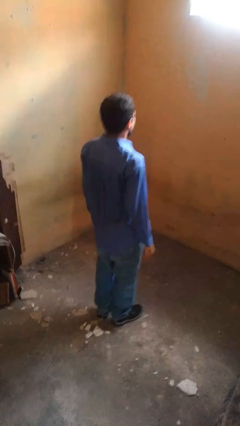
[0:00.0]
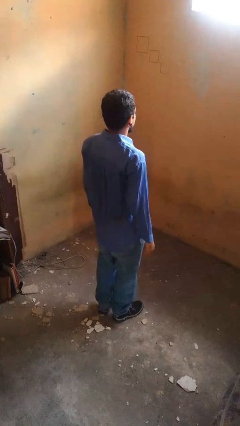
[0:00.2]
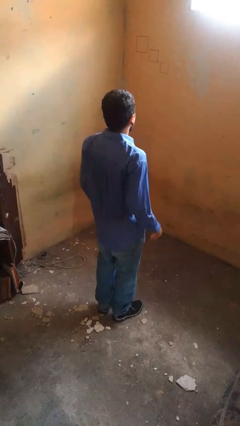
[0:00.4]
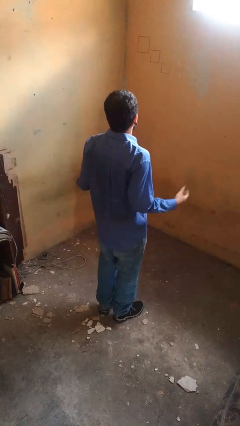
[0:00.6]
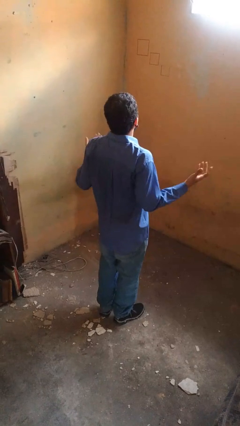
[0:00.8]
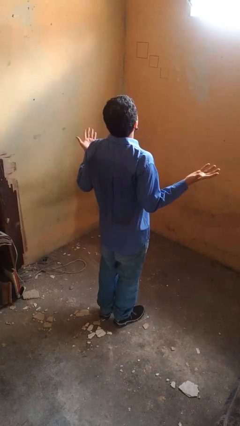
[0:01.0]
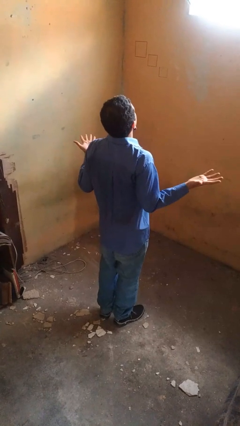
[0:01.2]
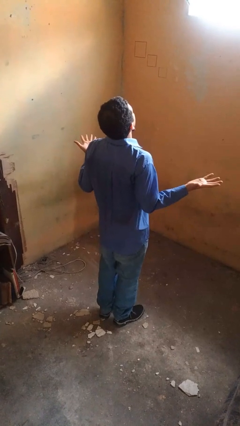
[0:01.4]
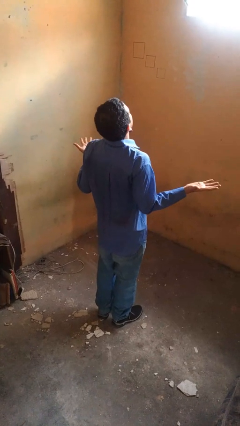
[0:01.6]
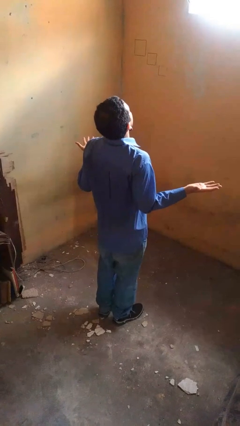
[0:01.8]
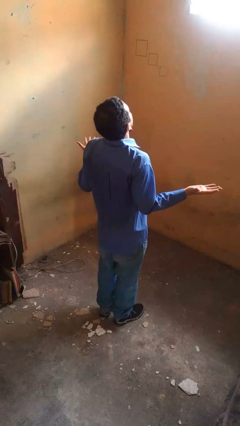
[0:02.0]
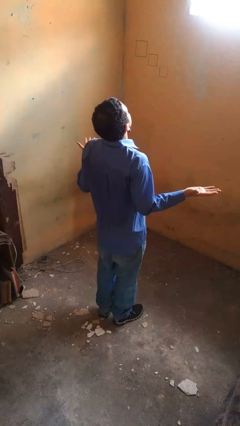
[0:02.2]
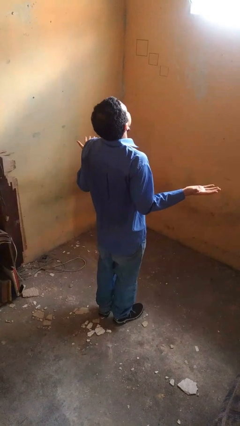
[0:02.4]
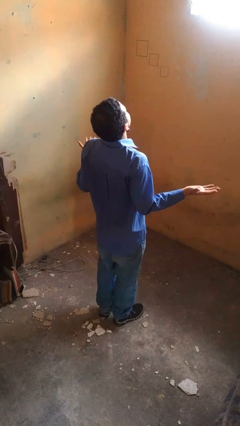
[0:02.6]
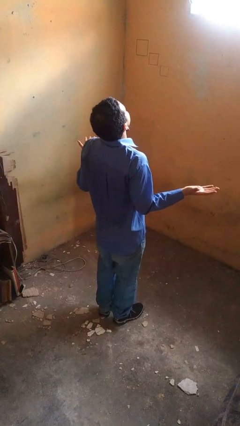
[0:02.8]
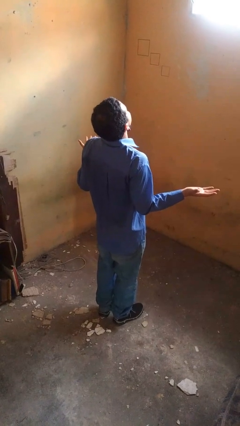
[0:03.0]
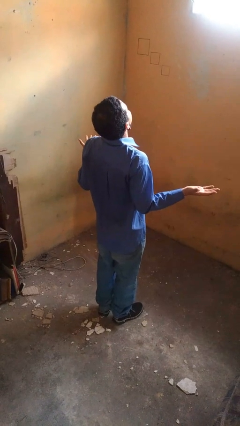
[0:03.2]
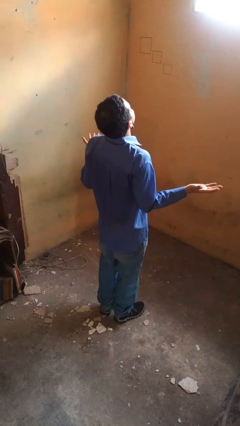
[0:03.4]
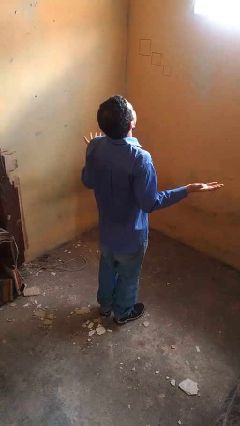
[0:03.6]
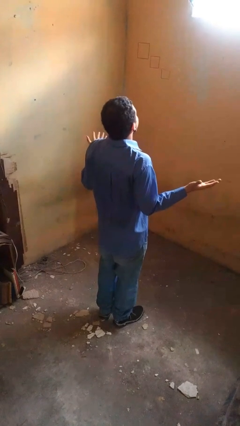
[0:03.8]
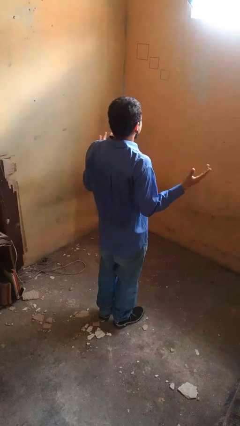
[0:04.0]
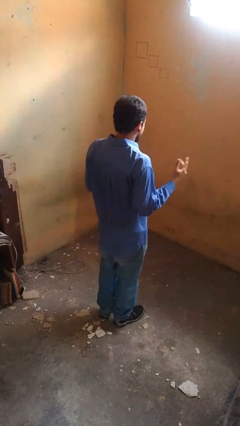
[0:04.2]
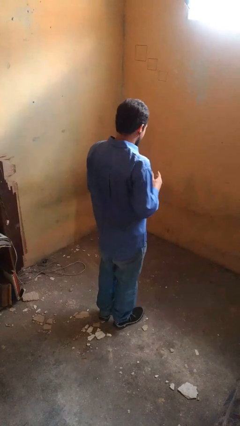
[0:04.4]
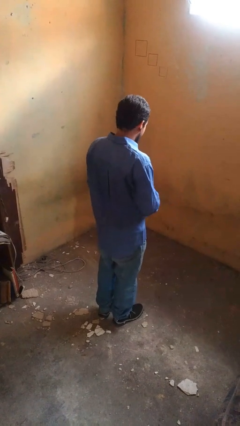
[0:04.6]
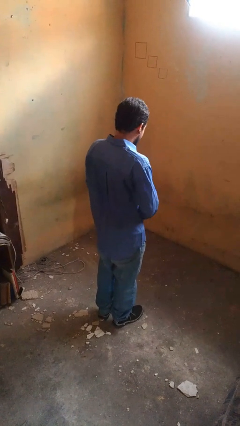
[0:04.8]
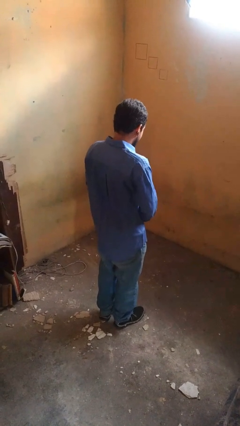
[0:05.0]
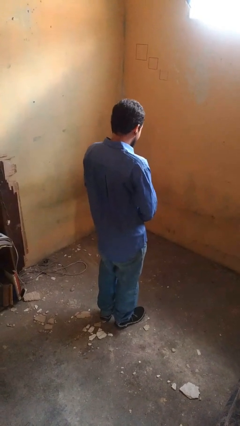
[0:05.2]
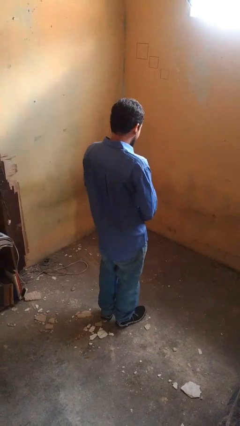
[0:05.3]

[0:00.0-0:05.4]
person prays

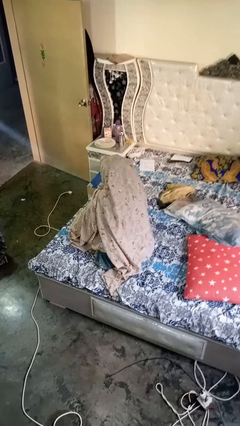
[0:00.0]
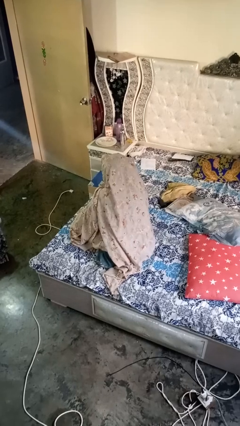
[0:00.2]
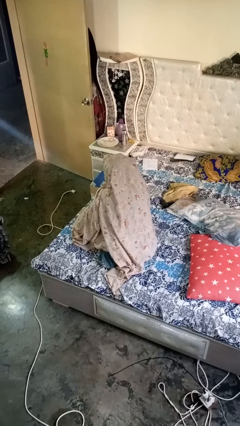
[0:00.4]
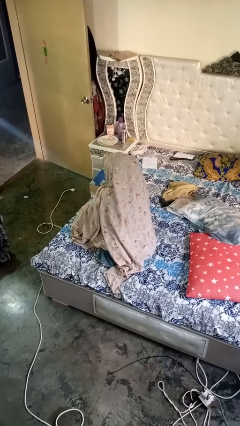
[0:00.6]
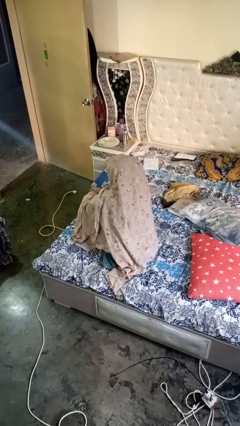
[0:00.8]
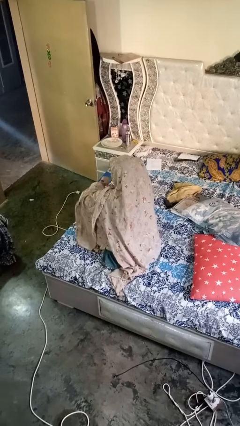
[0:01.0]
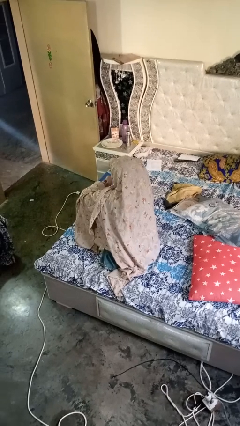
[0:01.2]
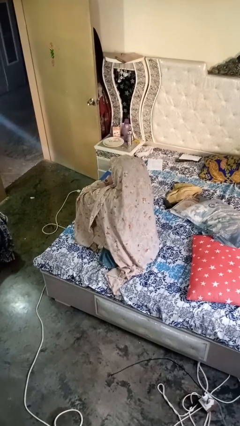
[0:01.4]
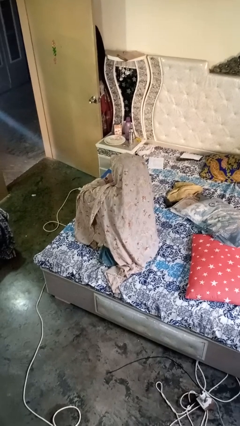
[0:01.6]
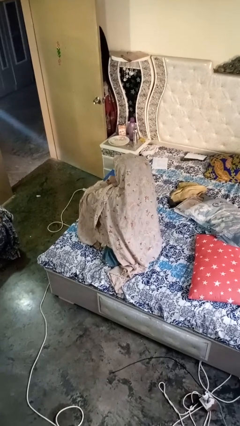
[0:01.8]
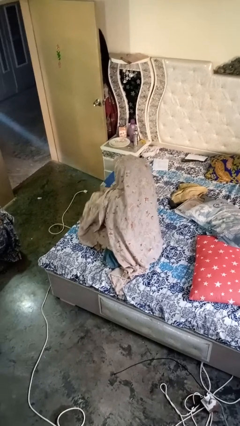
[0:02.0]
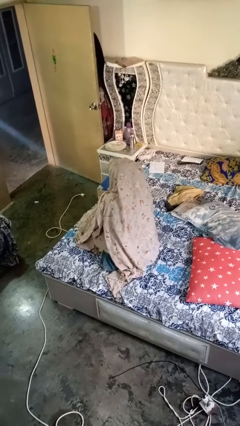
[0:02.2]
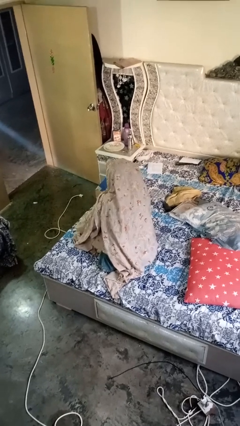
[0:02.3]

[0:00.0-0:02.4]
person looks at wristwatch

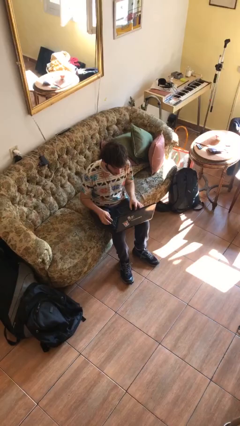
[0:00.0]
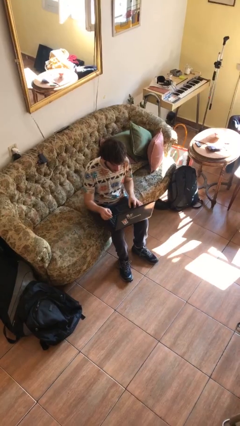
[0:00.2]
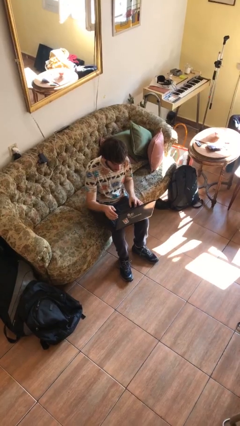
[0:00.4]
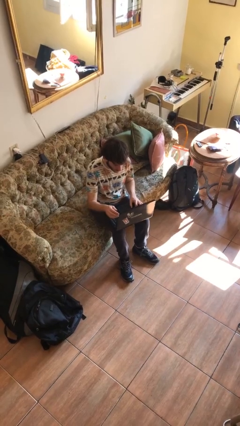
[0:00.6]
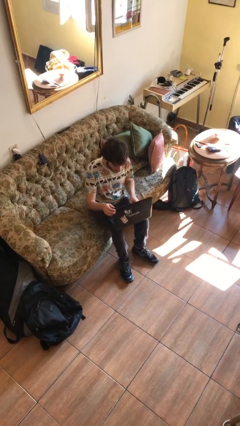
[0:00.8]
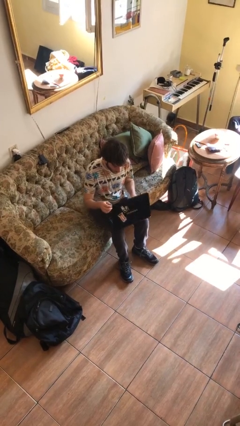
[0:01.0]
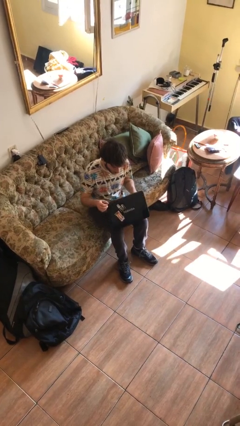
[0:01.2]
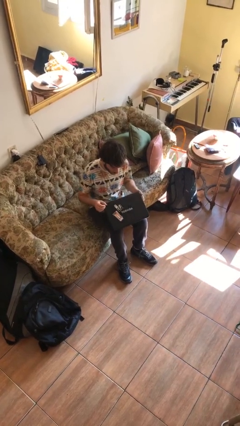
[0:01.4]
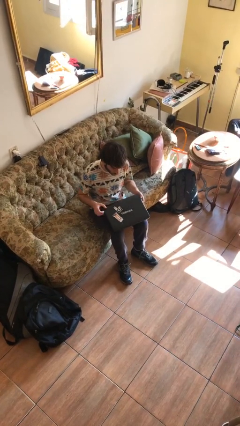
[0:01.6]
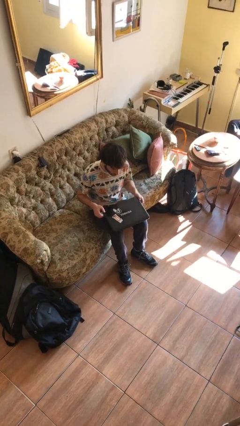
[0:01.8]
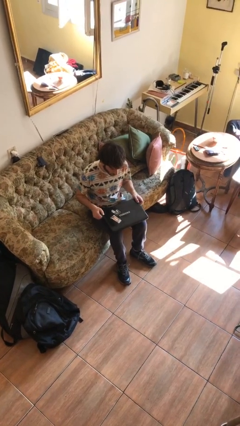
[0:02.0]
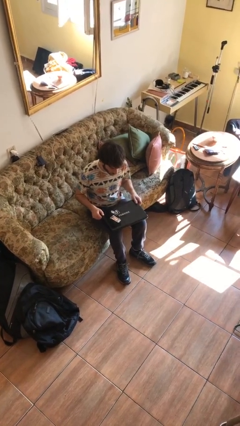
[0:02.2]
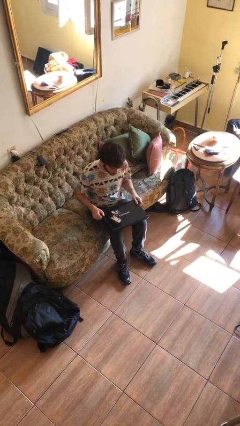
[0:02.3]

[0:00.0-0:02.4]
person closes laptop

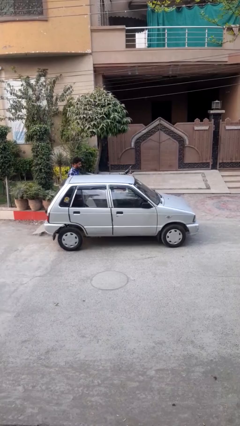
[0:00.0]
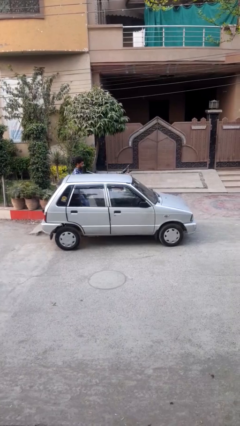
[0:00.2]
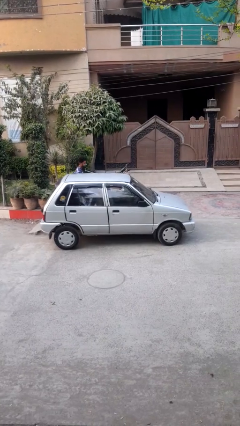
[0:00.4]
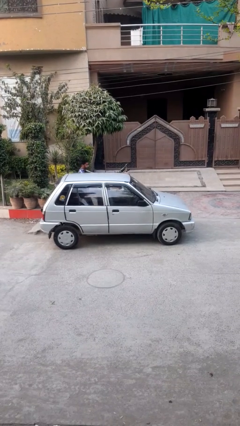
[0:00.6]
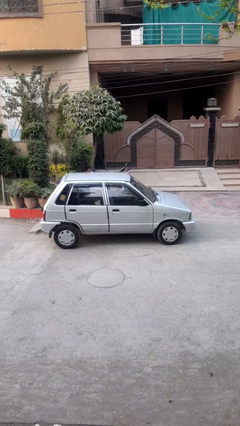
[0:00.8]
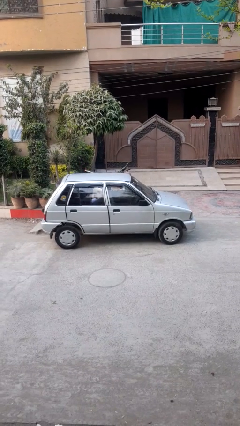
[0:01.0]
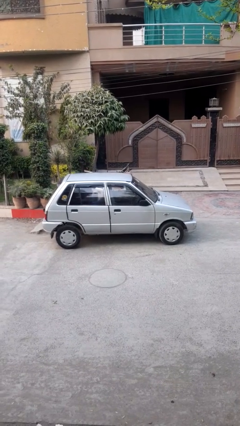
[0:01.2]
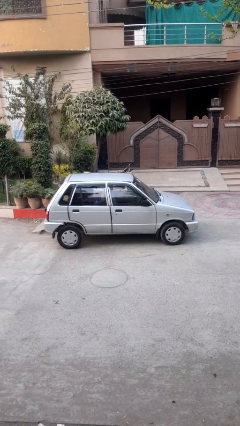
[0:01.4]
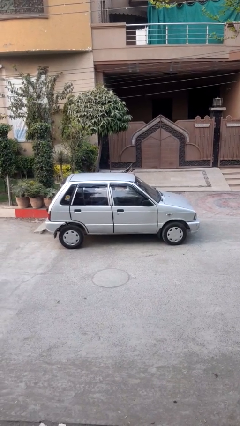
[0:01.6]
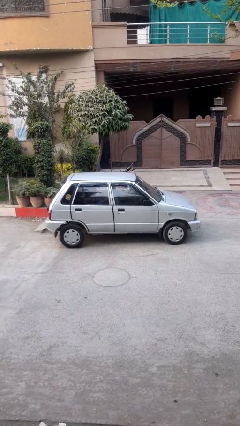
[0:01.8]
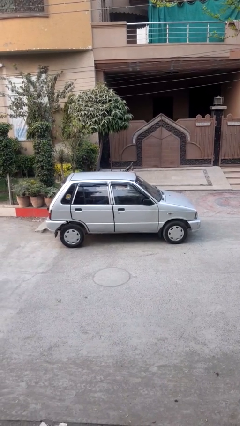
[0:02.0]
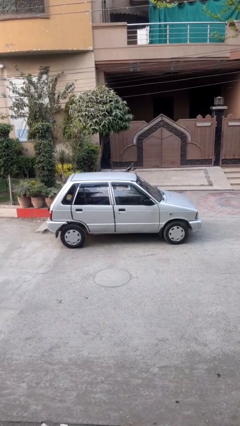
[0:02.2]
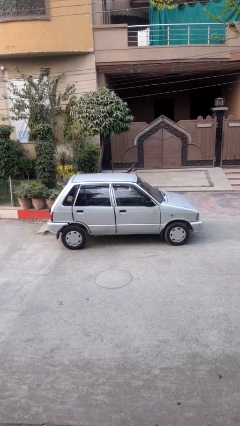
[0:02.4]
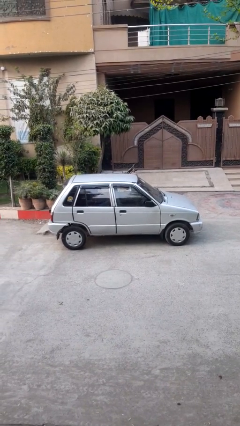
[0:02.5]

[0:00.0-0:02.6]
car picks up person

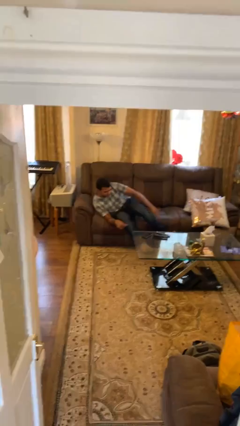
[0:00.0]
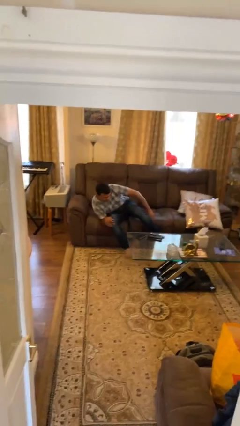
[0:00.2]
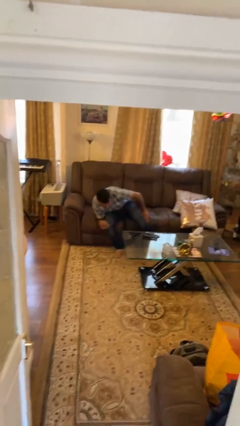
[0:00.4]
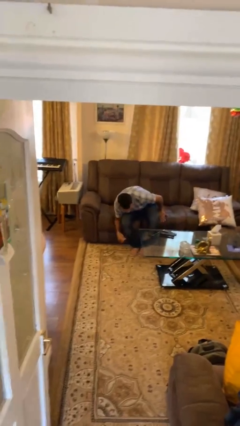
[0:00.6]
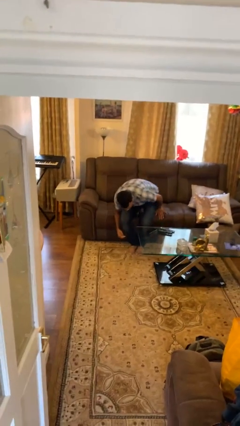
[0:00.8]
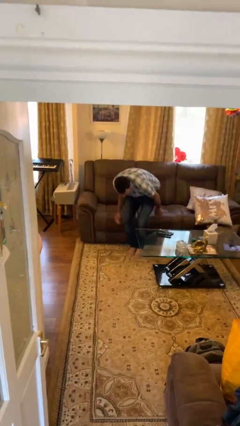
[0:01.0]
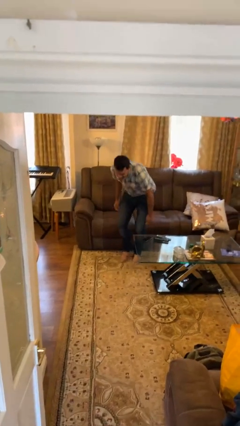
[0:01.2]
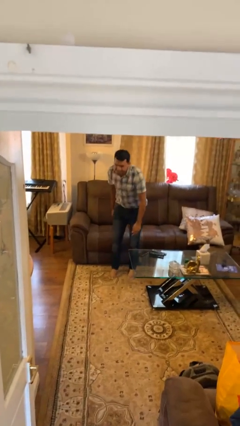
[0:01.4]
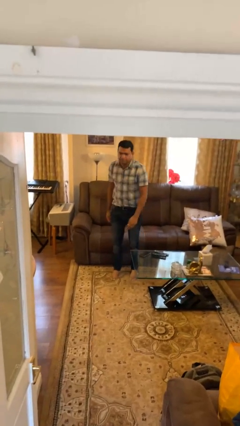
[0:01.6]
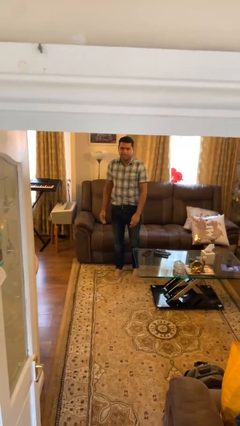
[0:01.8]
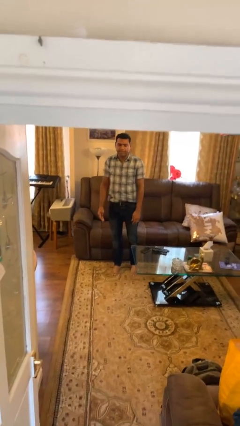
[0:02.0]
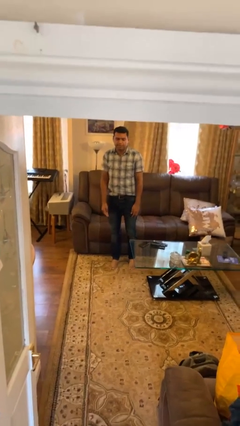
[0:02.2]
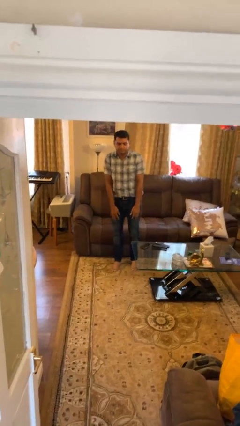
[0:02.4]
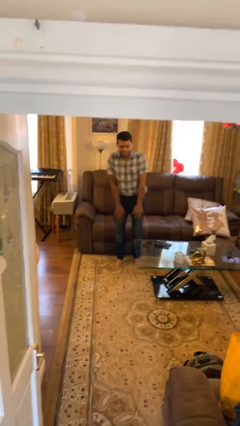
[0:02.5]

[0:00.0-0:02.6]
person stands up

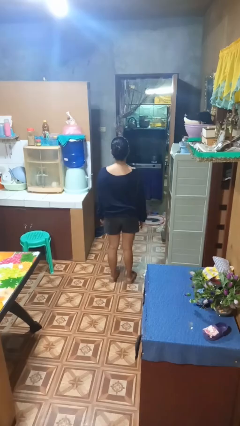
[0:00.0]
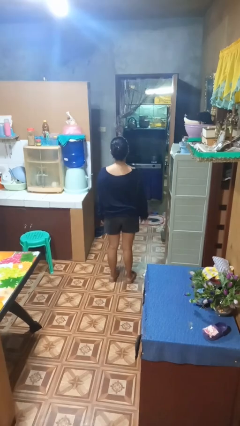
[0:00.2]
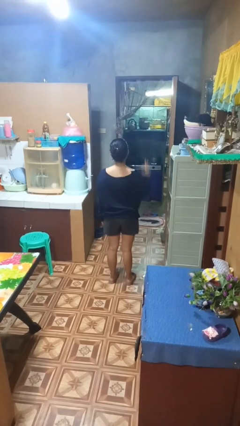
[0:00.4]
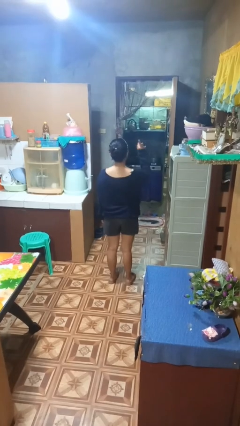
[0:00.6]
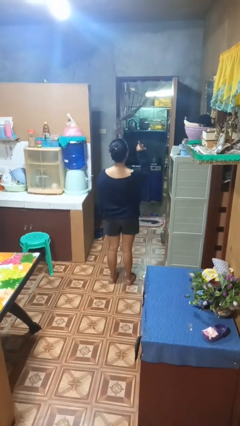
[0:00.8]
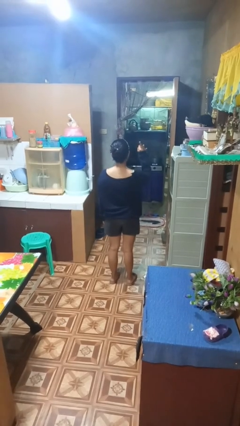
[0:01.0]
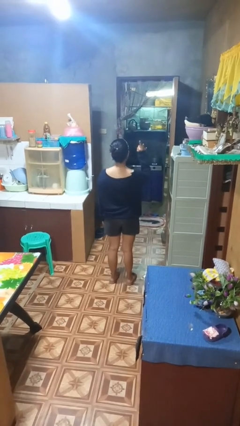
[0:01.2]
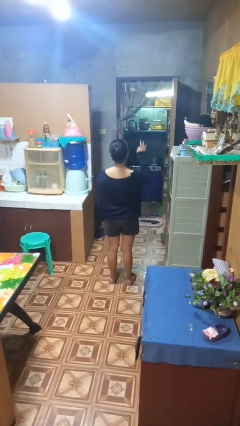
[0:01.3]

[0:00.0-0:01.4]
person gestures number three

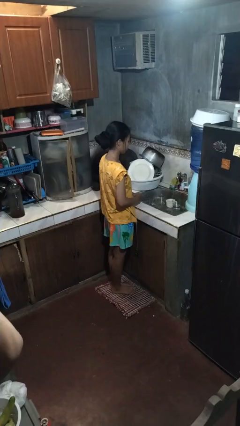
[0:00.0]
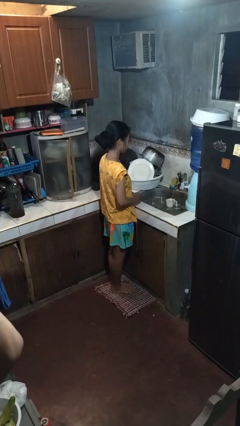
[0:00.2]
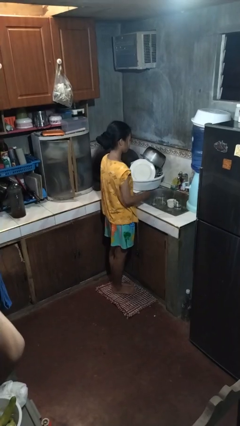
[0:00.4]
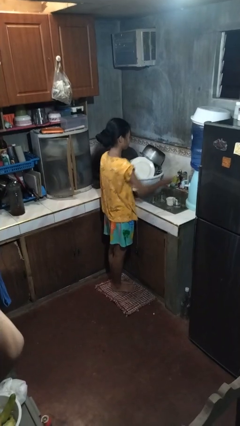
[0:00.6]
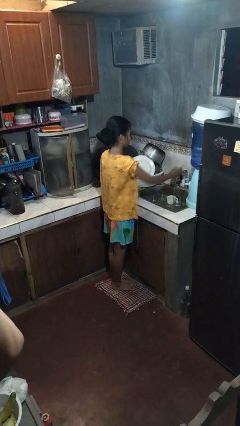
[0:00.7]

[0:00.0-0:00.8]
person turns off faucet
